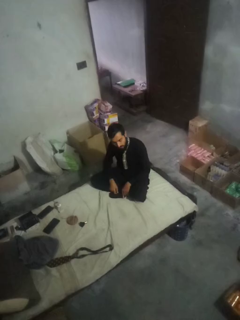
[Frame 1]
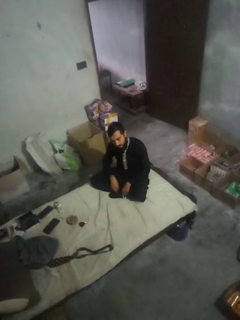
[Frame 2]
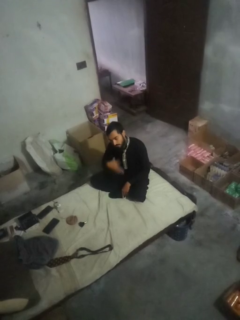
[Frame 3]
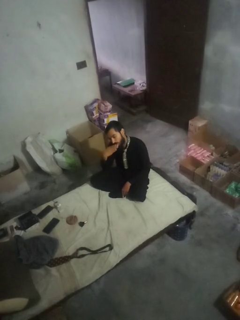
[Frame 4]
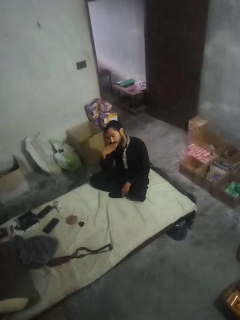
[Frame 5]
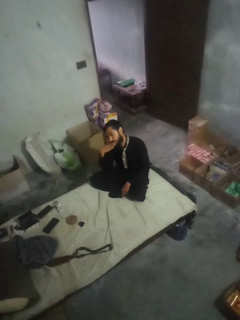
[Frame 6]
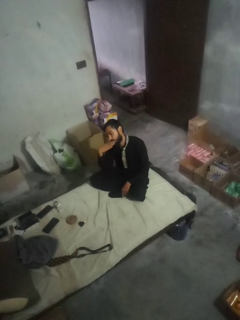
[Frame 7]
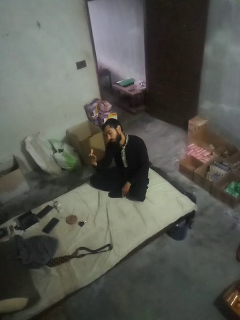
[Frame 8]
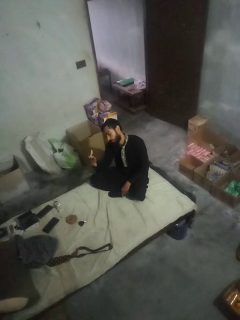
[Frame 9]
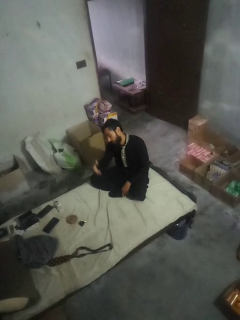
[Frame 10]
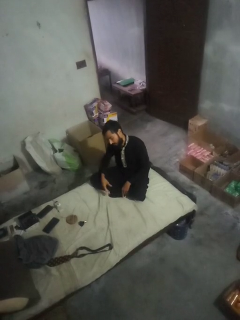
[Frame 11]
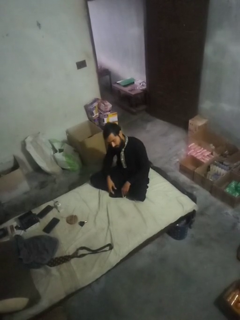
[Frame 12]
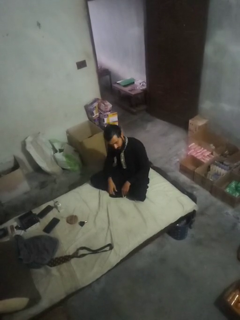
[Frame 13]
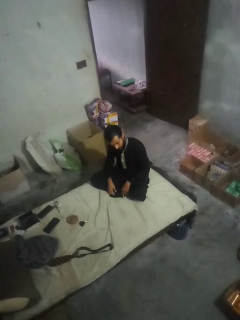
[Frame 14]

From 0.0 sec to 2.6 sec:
person gestures blow kiss

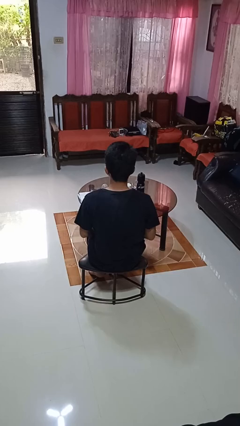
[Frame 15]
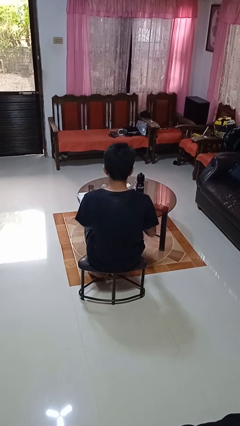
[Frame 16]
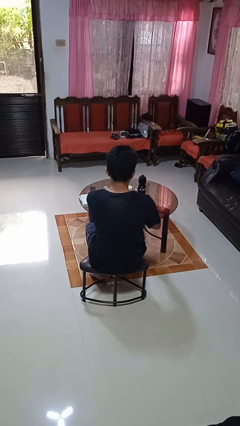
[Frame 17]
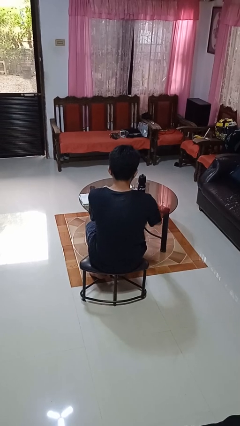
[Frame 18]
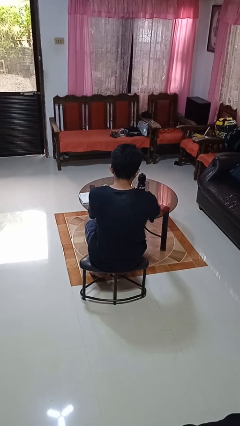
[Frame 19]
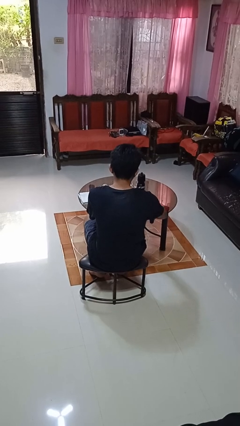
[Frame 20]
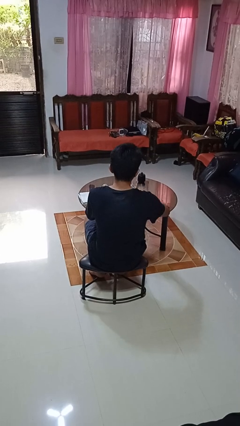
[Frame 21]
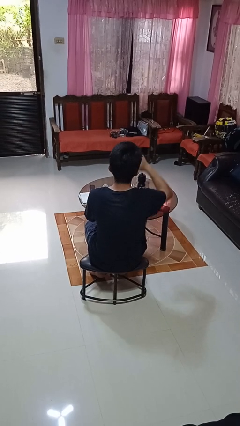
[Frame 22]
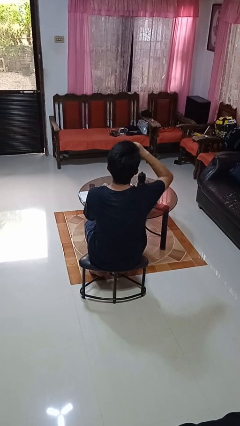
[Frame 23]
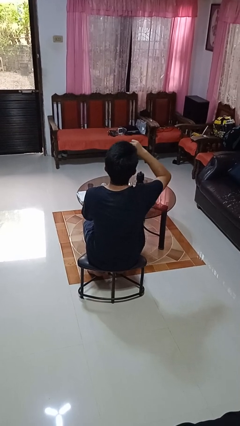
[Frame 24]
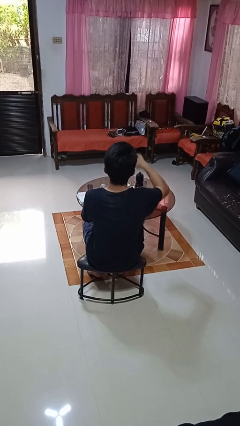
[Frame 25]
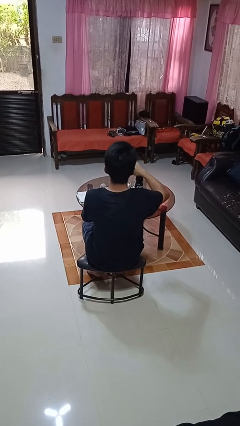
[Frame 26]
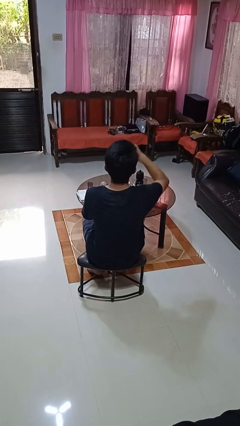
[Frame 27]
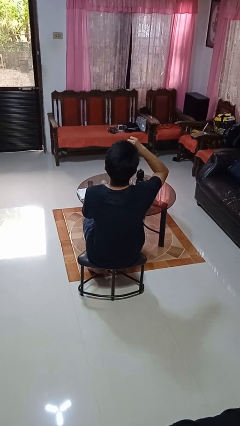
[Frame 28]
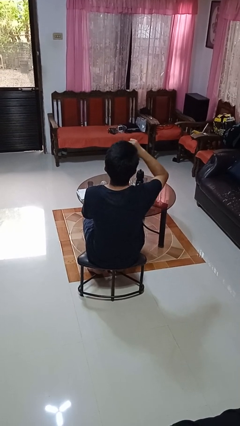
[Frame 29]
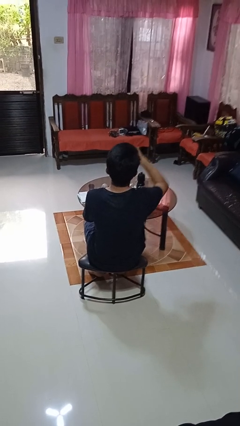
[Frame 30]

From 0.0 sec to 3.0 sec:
person eats with utensil

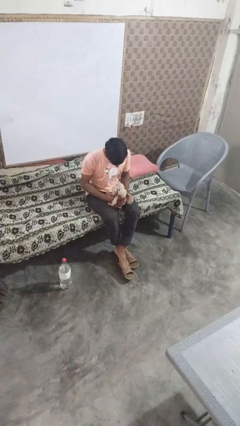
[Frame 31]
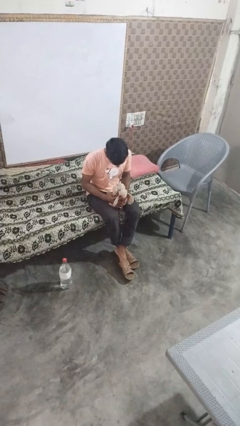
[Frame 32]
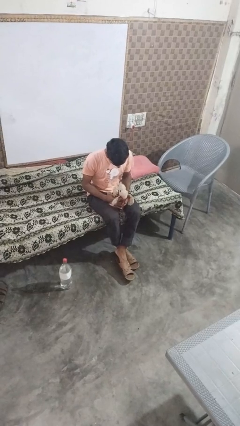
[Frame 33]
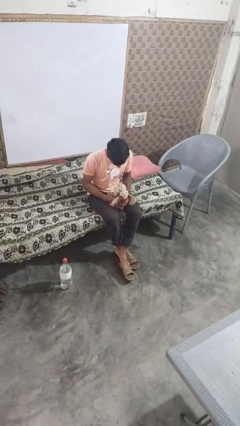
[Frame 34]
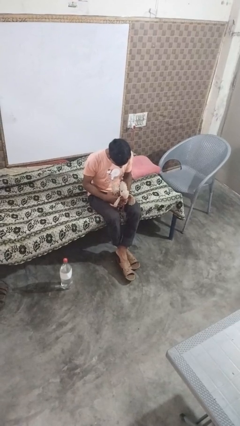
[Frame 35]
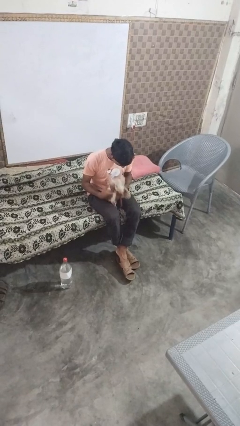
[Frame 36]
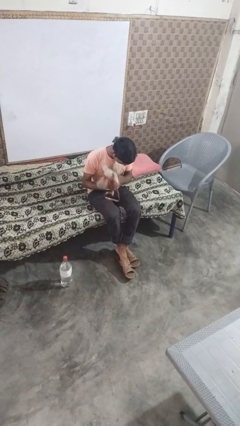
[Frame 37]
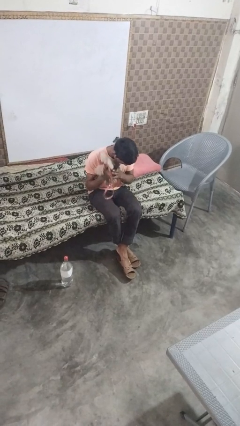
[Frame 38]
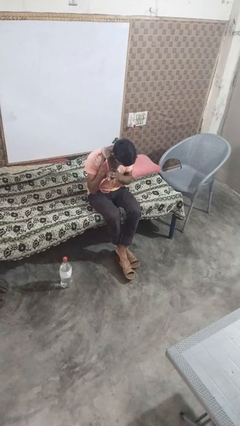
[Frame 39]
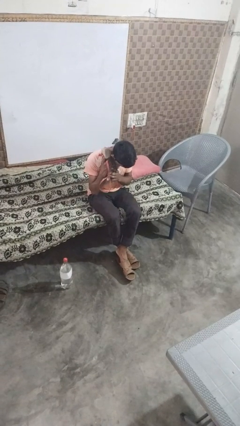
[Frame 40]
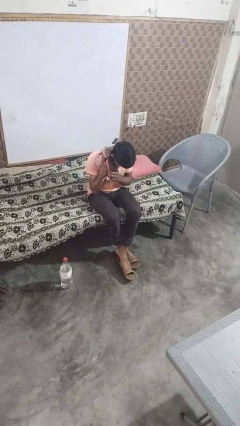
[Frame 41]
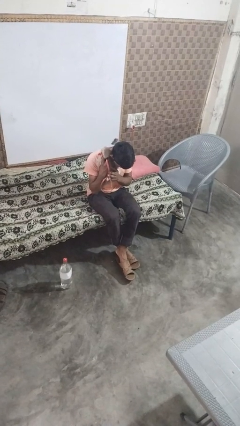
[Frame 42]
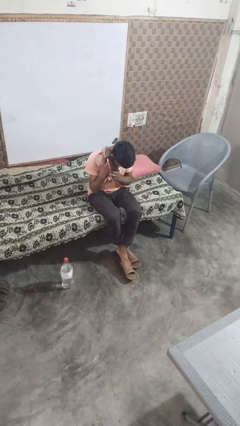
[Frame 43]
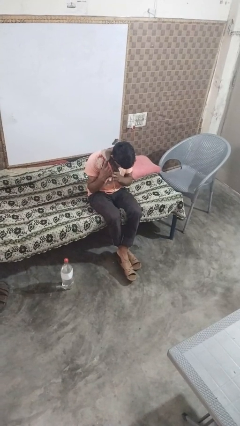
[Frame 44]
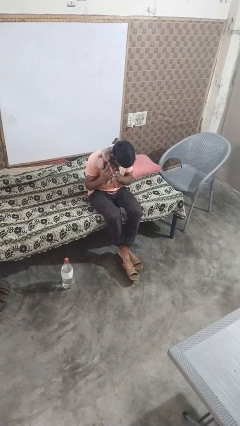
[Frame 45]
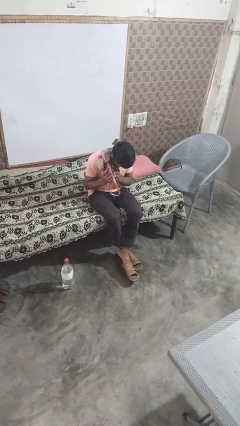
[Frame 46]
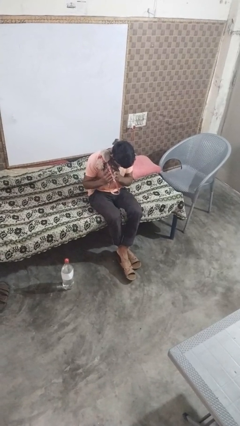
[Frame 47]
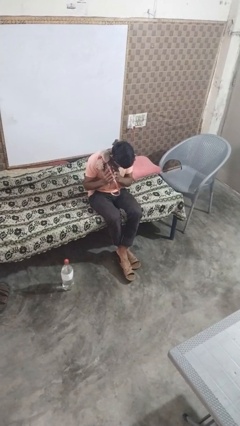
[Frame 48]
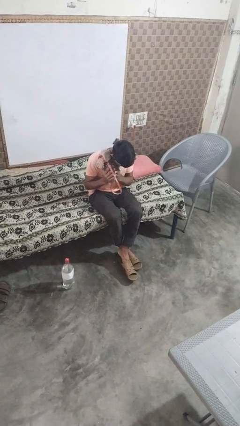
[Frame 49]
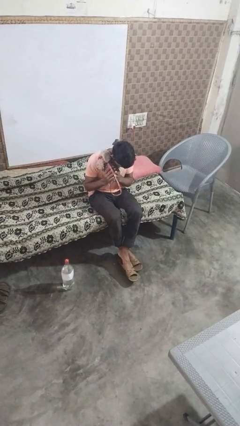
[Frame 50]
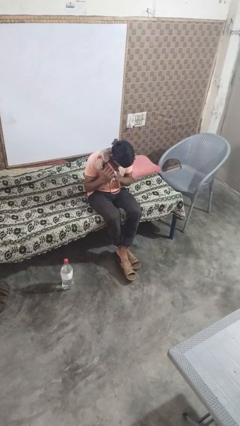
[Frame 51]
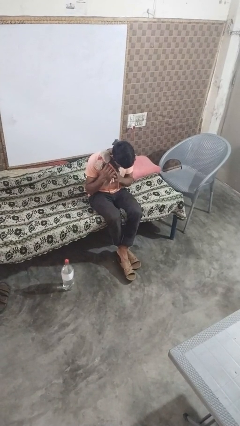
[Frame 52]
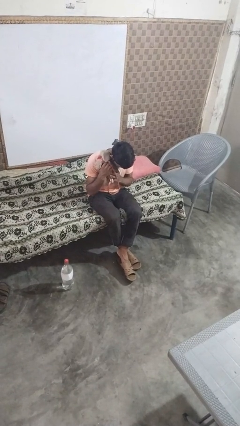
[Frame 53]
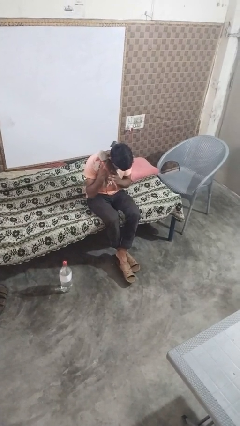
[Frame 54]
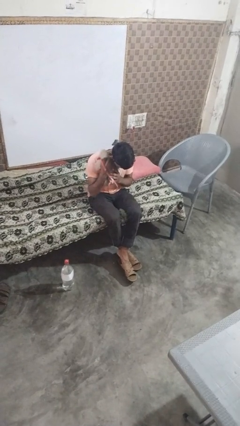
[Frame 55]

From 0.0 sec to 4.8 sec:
person hugs stuffed animal

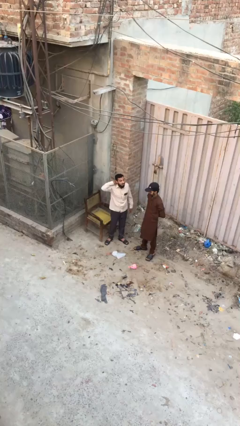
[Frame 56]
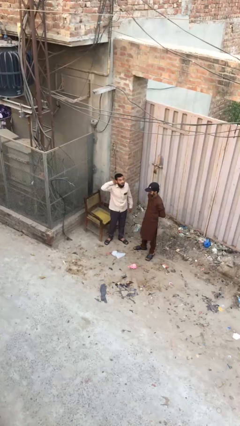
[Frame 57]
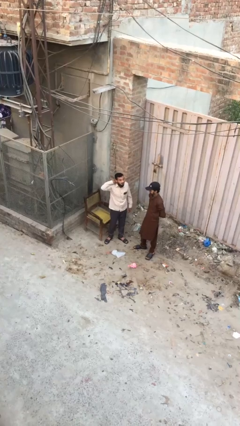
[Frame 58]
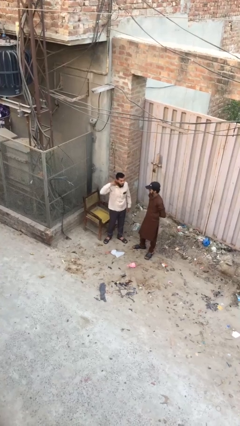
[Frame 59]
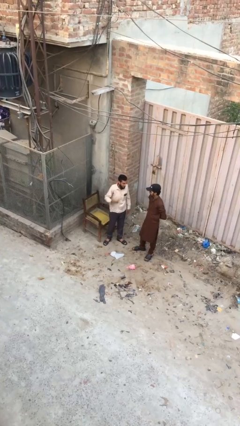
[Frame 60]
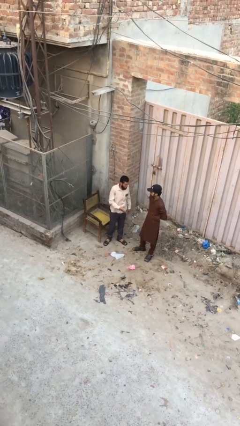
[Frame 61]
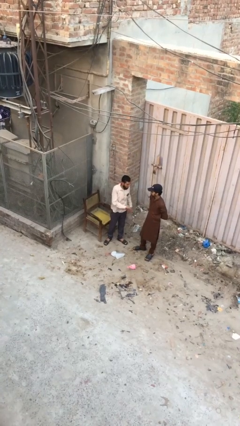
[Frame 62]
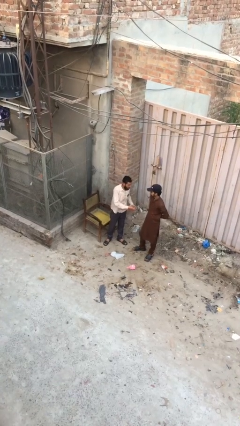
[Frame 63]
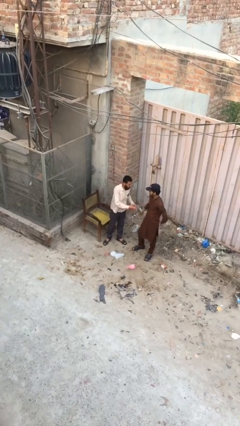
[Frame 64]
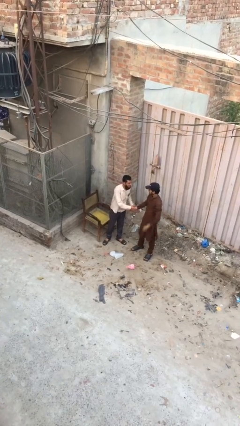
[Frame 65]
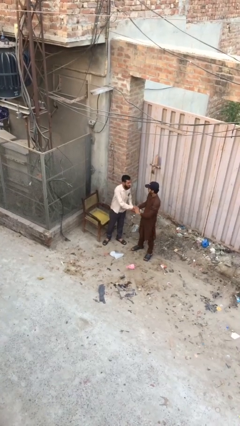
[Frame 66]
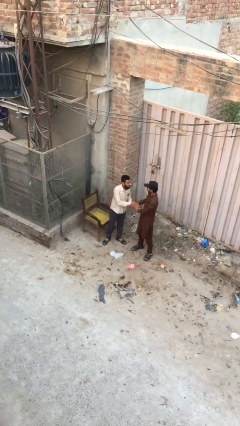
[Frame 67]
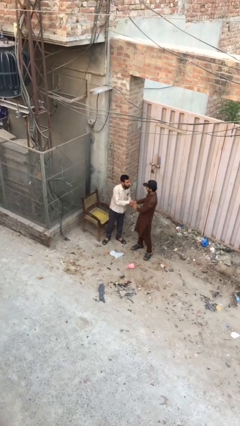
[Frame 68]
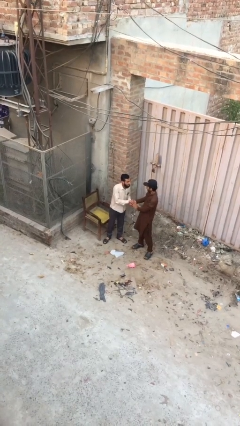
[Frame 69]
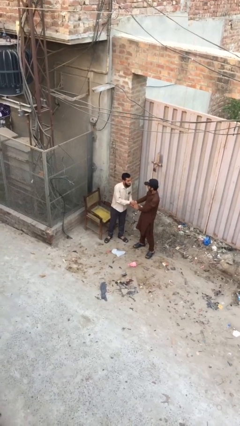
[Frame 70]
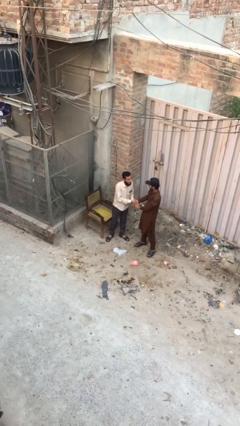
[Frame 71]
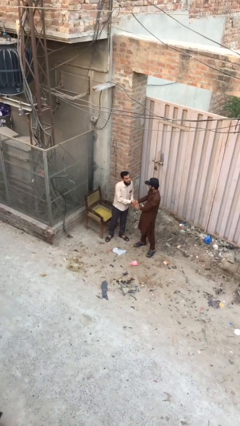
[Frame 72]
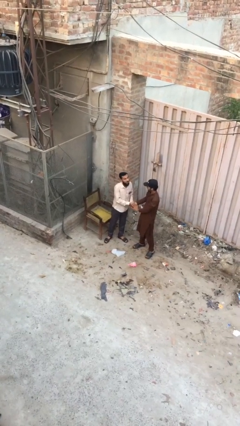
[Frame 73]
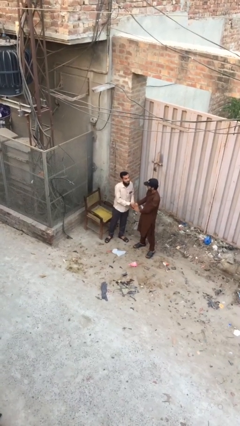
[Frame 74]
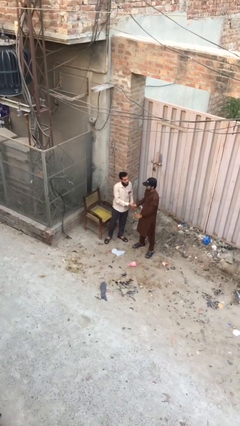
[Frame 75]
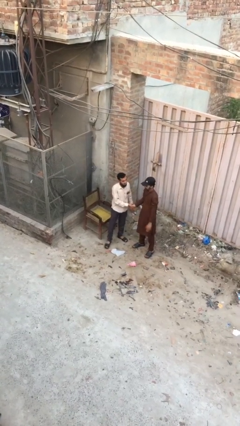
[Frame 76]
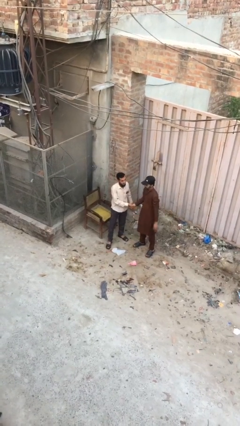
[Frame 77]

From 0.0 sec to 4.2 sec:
person shakes hand

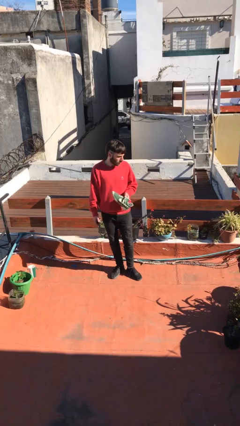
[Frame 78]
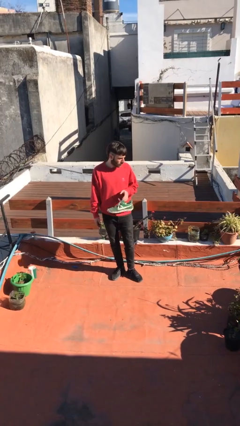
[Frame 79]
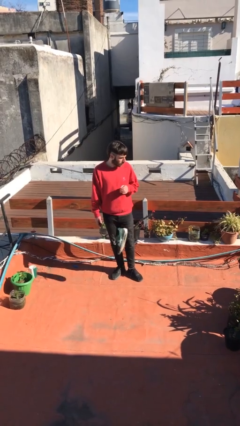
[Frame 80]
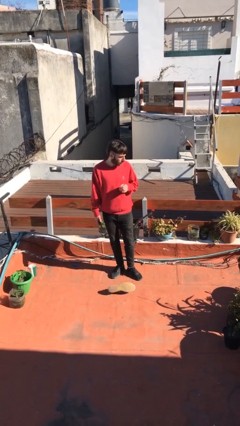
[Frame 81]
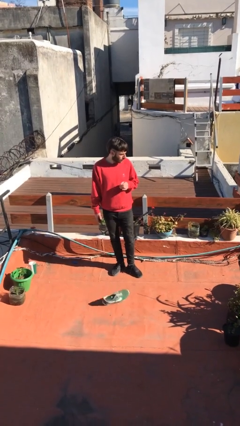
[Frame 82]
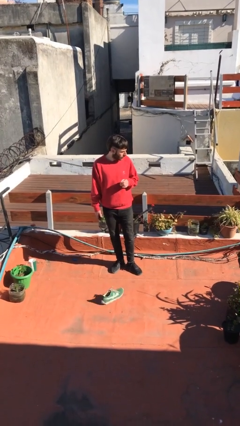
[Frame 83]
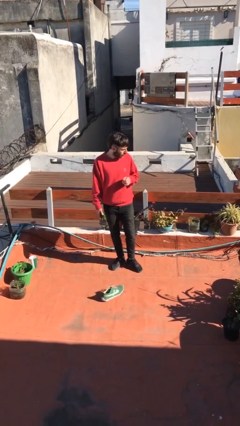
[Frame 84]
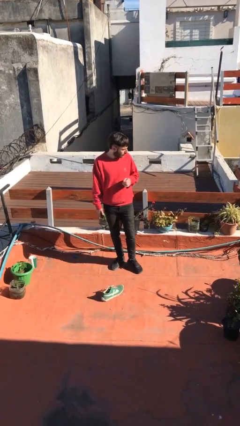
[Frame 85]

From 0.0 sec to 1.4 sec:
person drops object

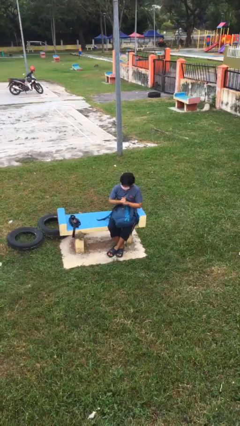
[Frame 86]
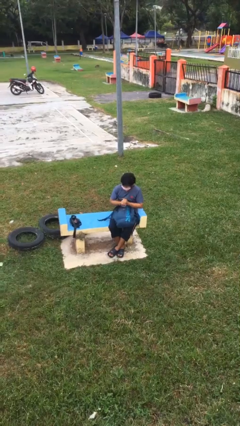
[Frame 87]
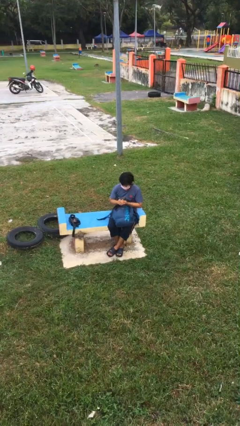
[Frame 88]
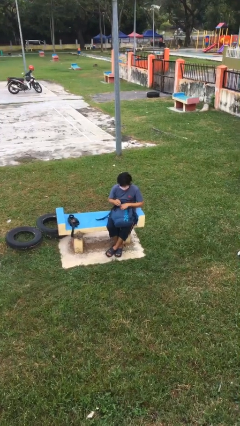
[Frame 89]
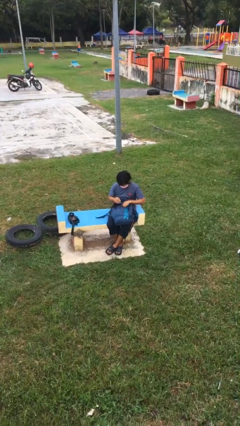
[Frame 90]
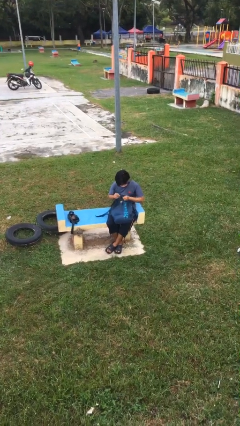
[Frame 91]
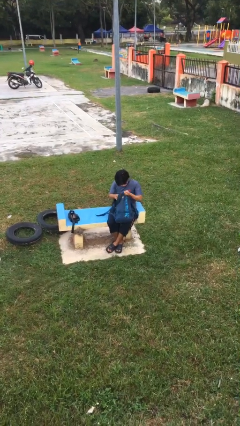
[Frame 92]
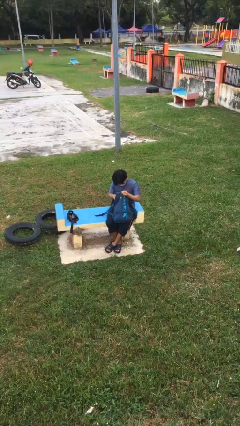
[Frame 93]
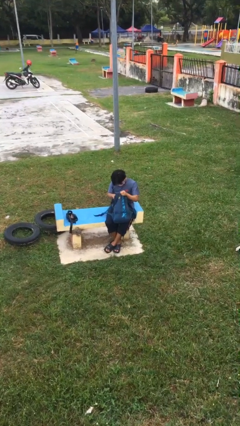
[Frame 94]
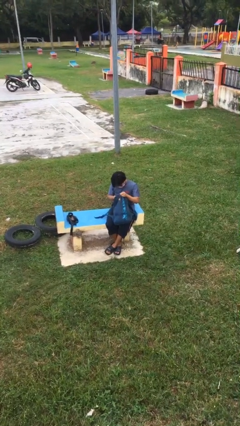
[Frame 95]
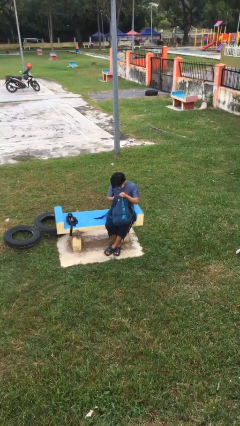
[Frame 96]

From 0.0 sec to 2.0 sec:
person searches in backpack
